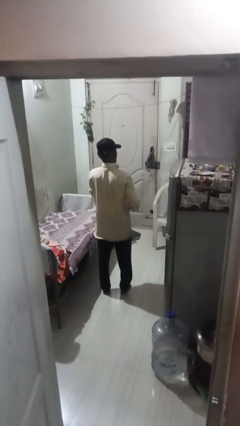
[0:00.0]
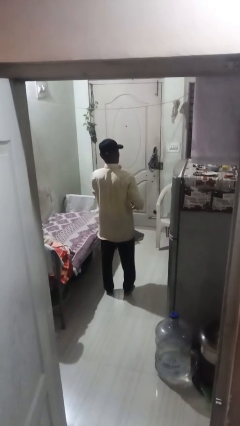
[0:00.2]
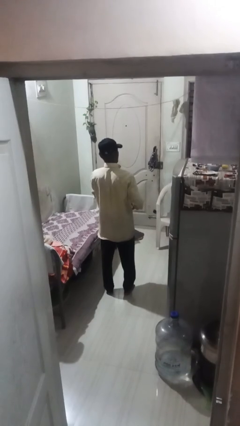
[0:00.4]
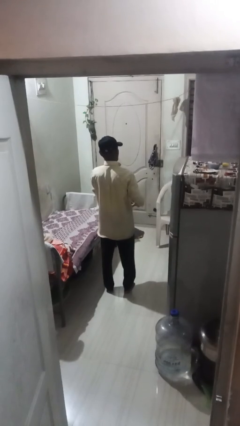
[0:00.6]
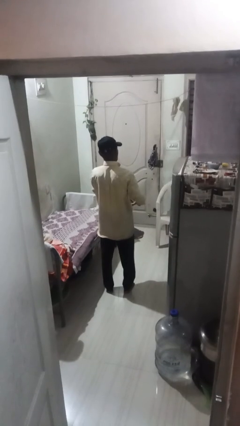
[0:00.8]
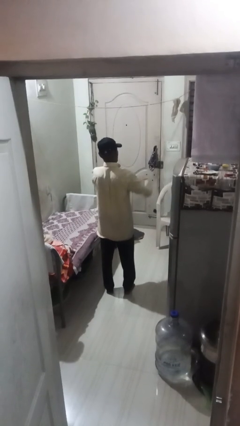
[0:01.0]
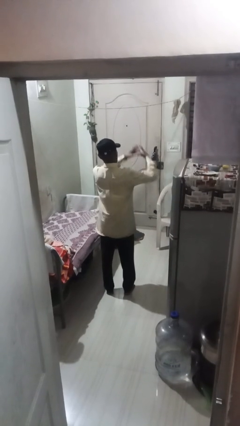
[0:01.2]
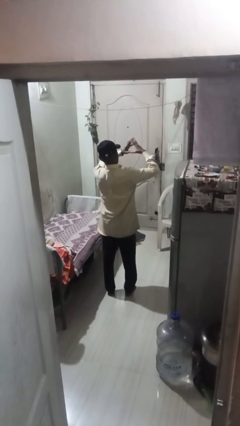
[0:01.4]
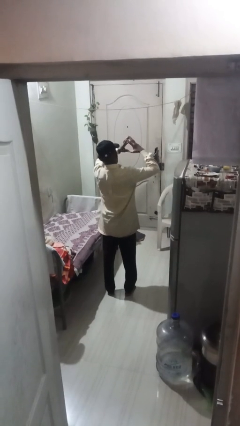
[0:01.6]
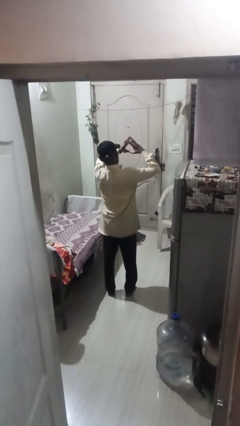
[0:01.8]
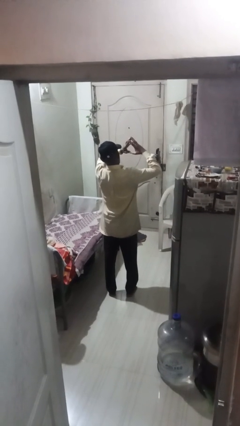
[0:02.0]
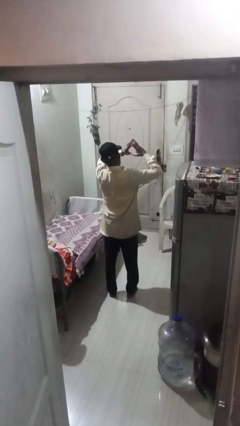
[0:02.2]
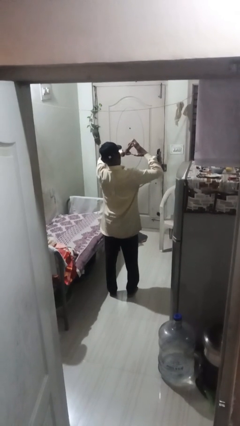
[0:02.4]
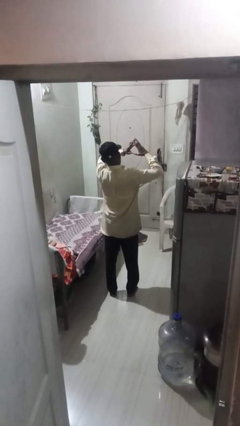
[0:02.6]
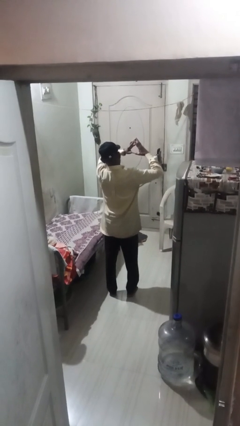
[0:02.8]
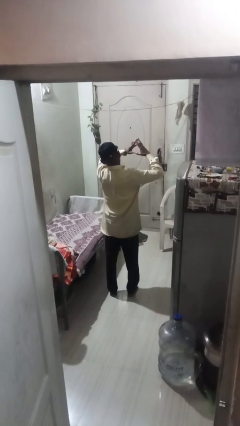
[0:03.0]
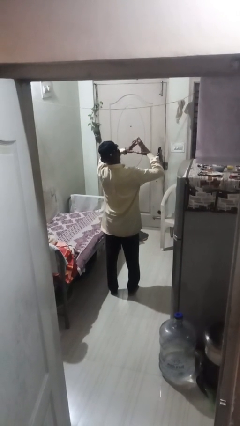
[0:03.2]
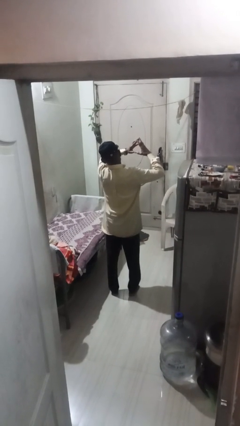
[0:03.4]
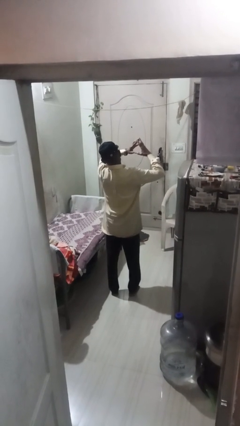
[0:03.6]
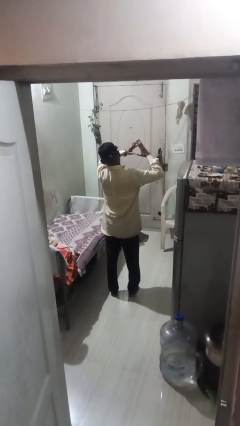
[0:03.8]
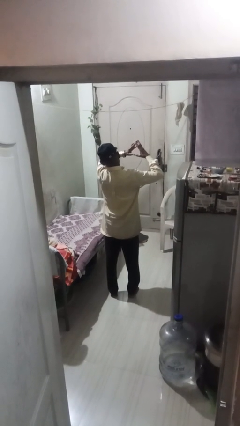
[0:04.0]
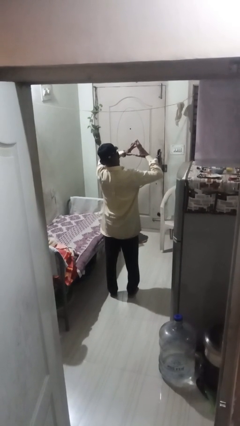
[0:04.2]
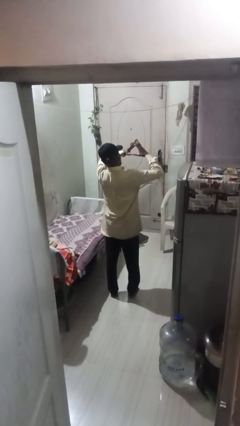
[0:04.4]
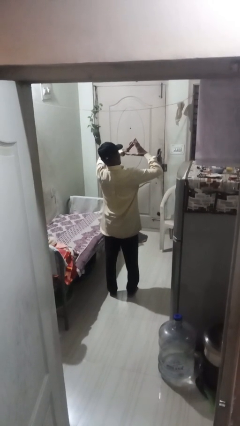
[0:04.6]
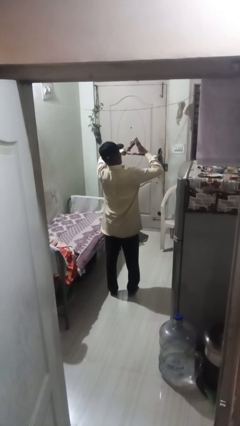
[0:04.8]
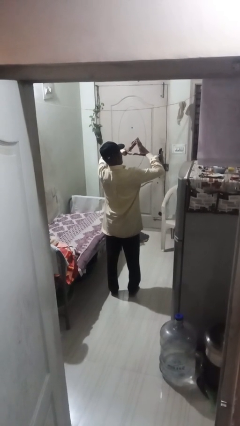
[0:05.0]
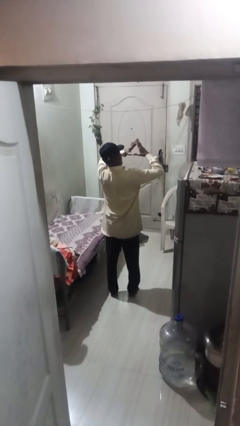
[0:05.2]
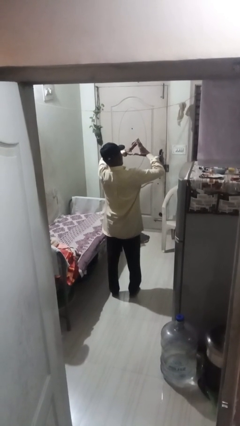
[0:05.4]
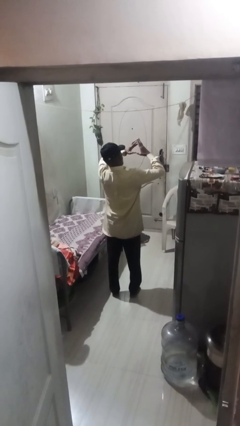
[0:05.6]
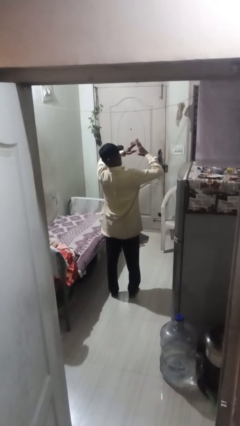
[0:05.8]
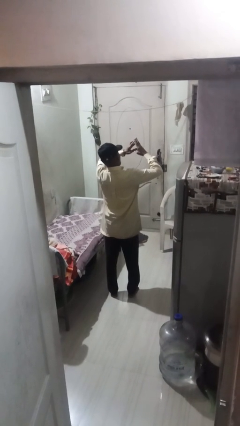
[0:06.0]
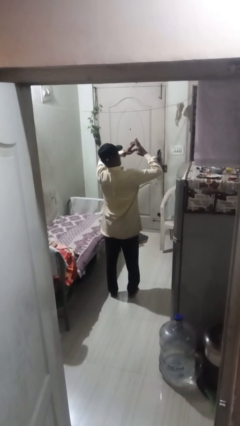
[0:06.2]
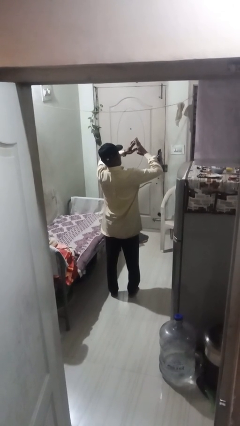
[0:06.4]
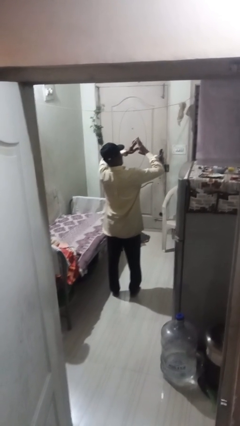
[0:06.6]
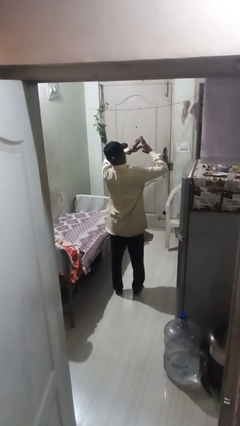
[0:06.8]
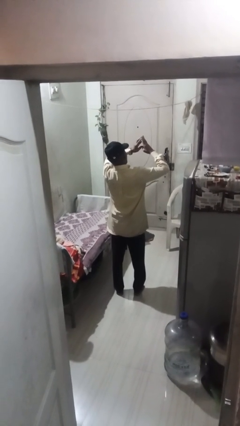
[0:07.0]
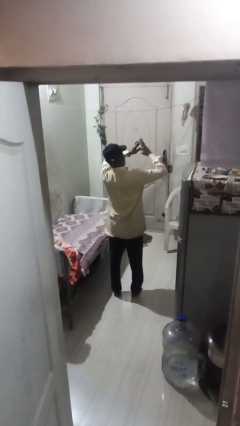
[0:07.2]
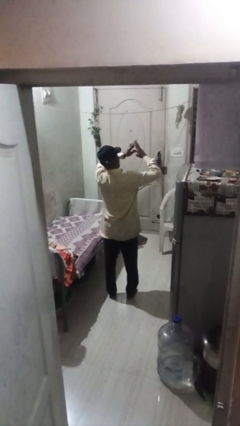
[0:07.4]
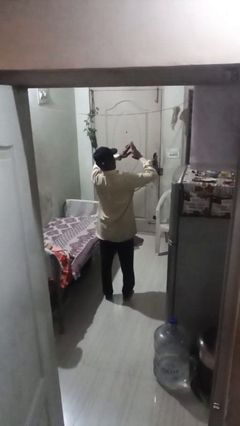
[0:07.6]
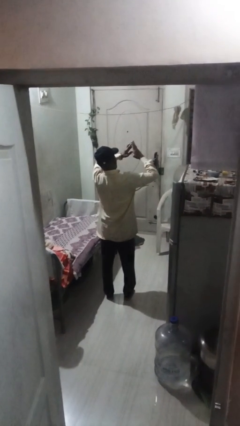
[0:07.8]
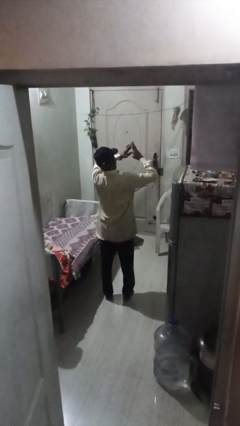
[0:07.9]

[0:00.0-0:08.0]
person gestures heart

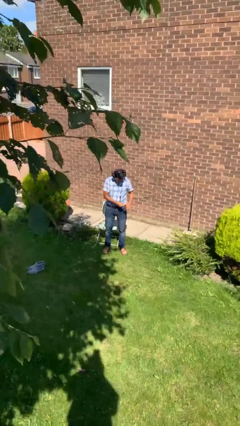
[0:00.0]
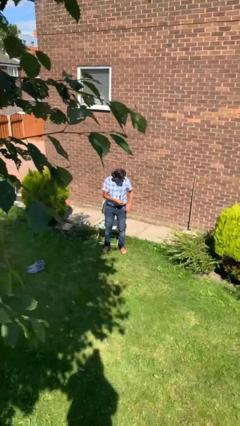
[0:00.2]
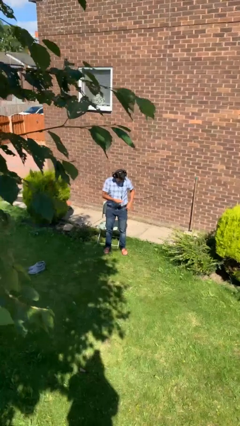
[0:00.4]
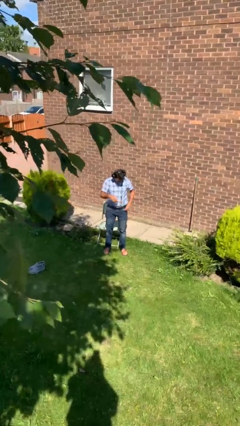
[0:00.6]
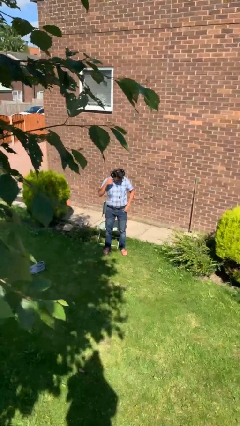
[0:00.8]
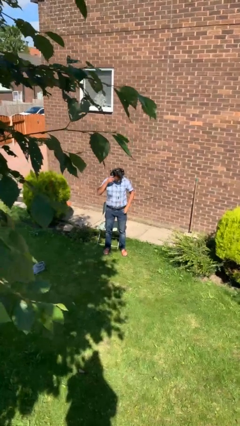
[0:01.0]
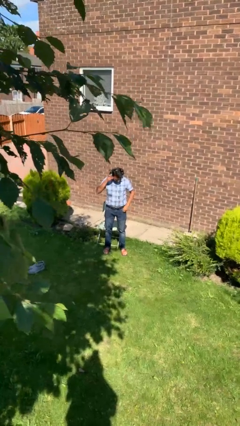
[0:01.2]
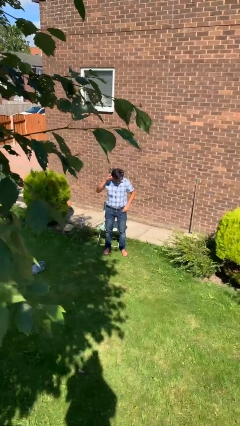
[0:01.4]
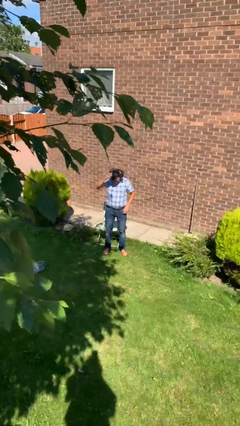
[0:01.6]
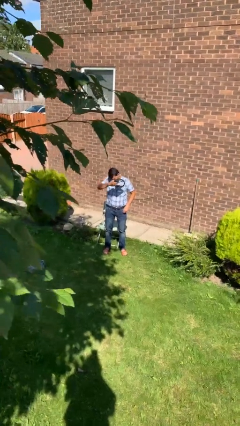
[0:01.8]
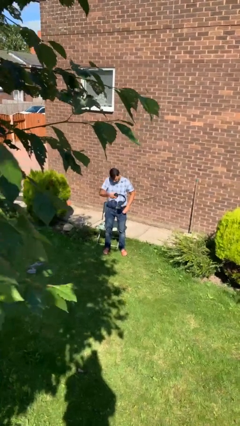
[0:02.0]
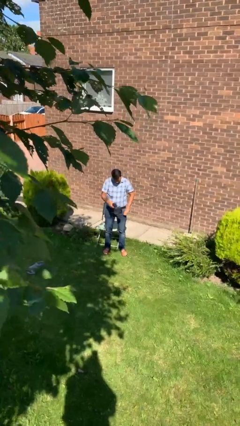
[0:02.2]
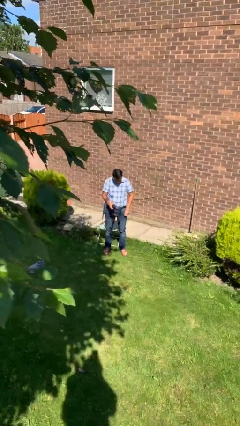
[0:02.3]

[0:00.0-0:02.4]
person takes off headphones

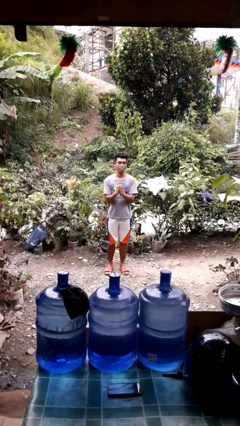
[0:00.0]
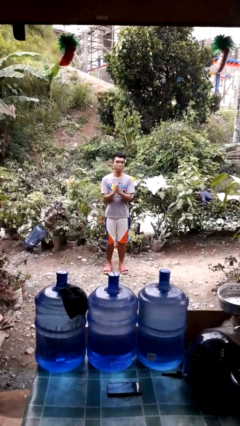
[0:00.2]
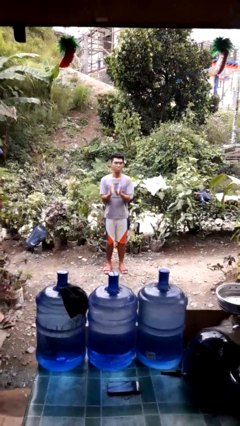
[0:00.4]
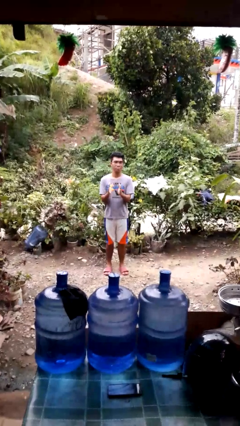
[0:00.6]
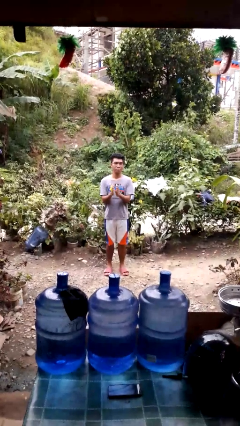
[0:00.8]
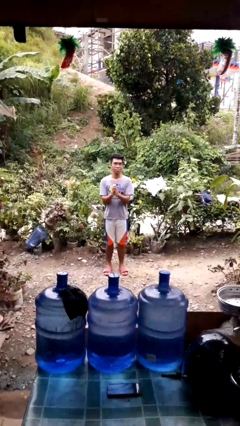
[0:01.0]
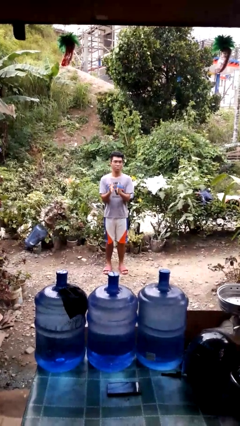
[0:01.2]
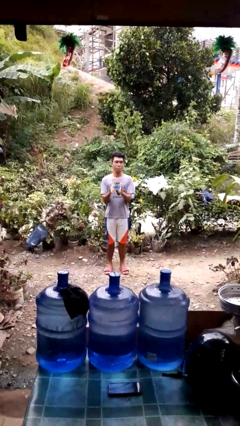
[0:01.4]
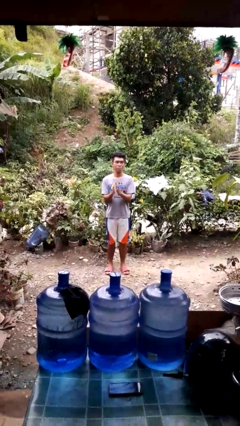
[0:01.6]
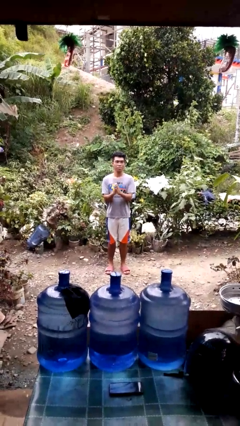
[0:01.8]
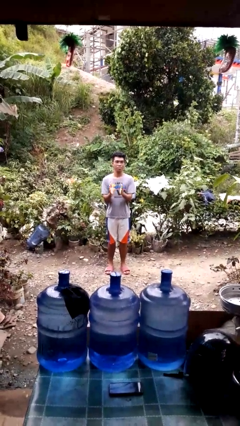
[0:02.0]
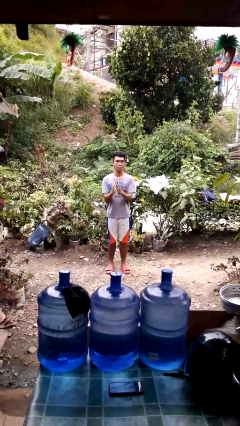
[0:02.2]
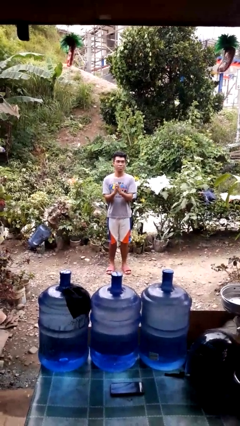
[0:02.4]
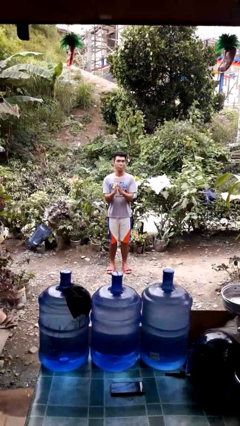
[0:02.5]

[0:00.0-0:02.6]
person claps hands

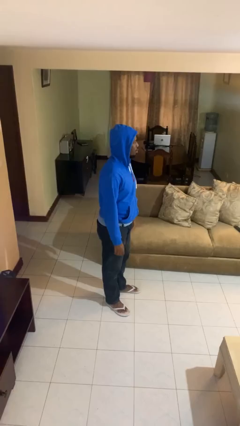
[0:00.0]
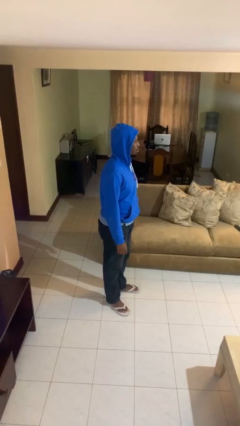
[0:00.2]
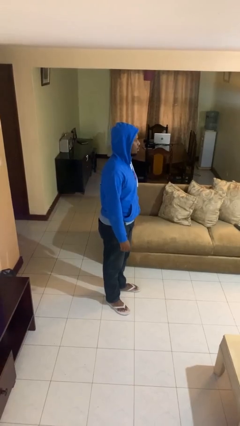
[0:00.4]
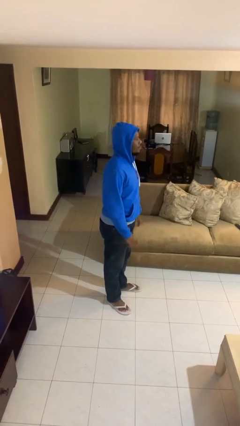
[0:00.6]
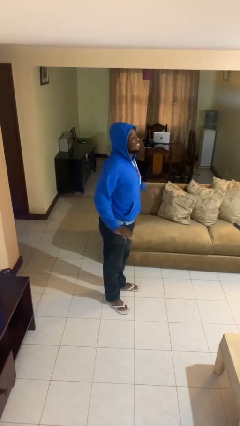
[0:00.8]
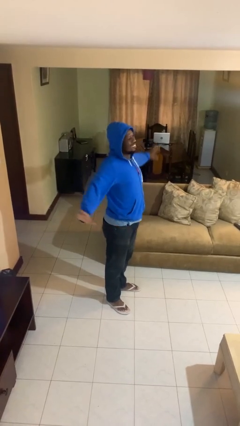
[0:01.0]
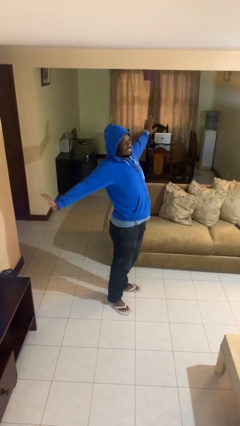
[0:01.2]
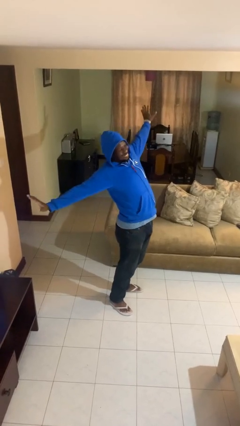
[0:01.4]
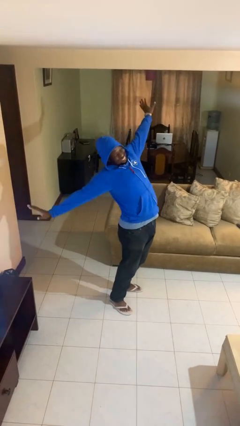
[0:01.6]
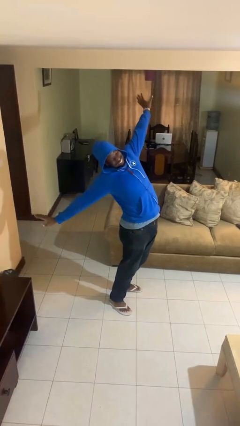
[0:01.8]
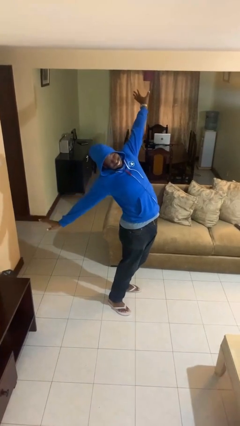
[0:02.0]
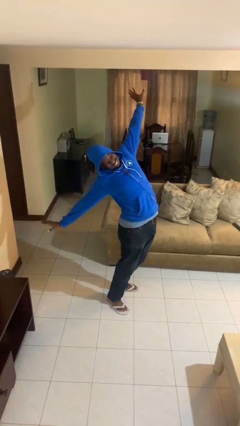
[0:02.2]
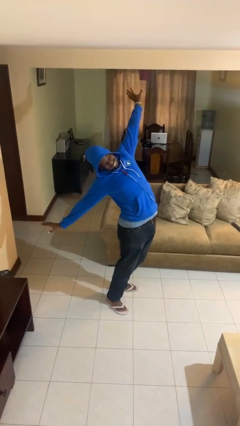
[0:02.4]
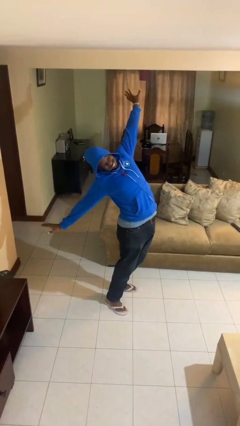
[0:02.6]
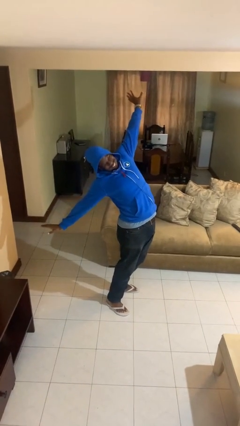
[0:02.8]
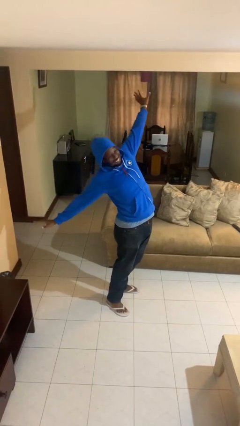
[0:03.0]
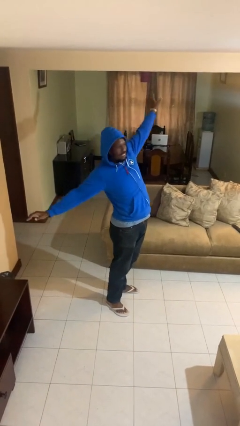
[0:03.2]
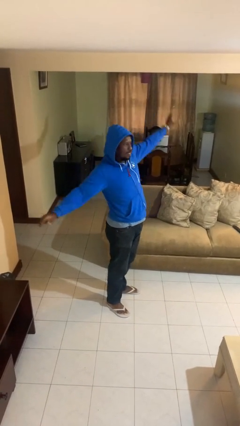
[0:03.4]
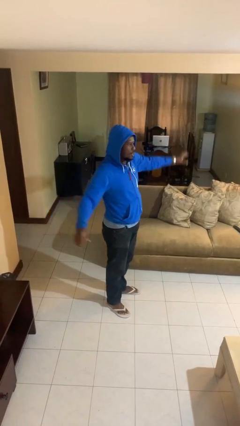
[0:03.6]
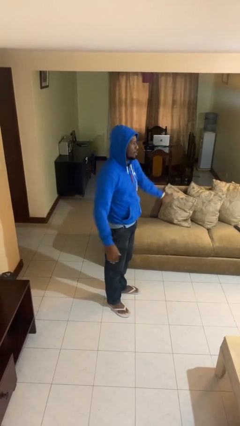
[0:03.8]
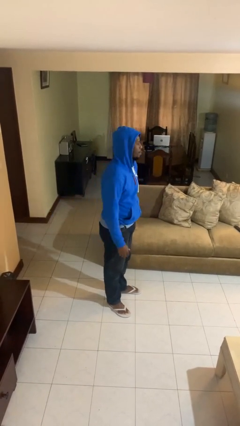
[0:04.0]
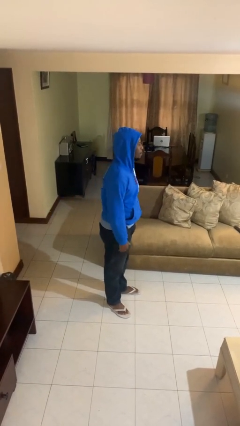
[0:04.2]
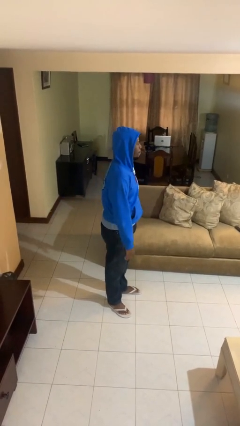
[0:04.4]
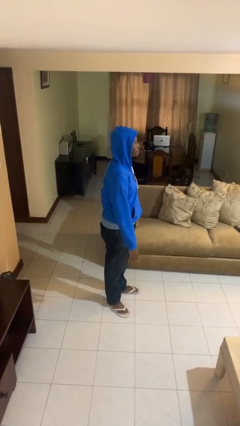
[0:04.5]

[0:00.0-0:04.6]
person stretches arms to side

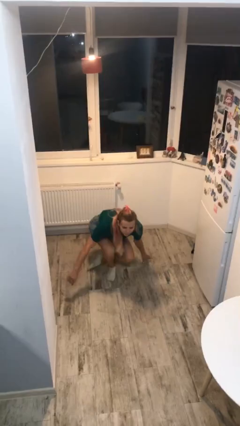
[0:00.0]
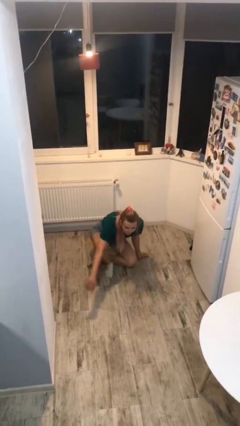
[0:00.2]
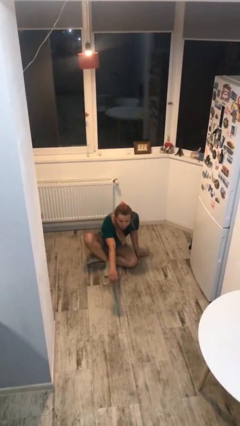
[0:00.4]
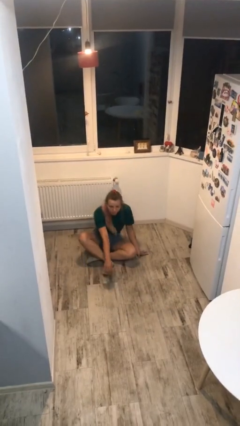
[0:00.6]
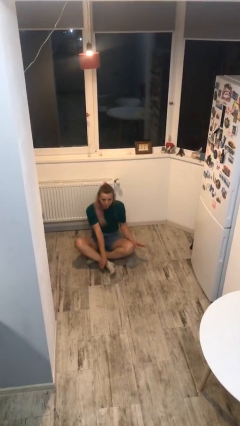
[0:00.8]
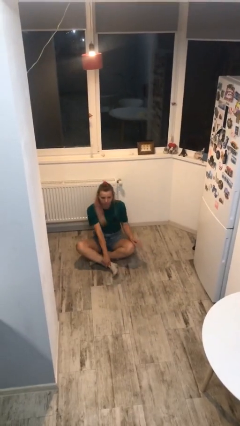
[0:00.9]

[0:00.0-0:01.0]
person sits crisscross
